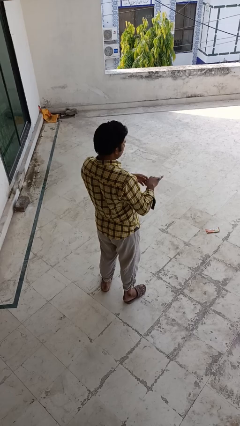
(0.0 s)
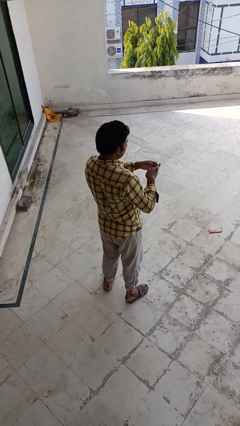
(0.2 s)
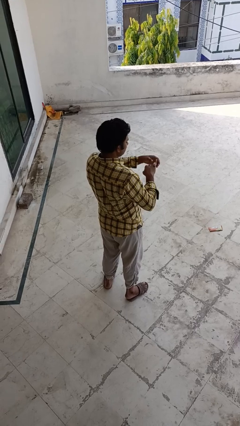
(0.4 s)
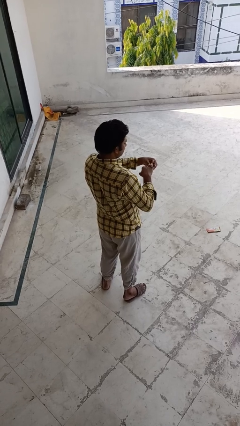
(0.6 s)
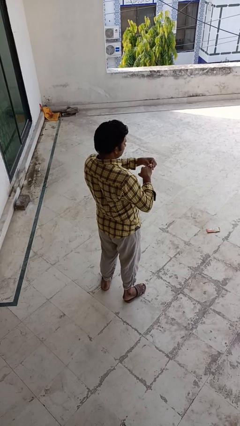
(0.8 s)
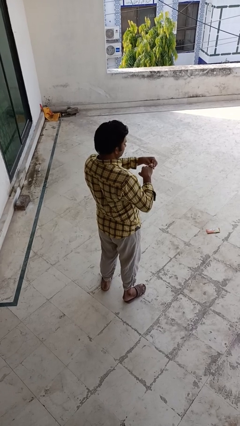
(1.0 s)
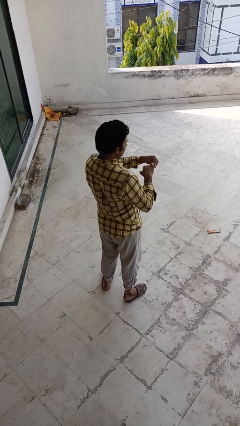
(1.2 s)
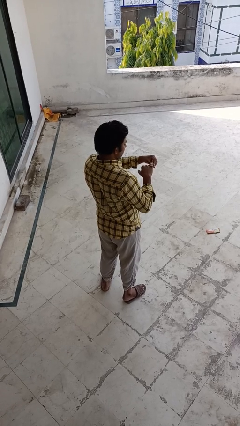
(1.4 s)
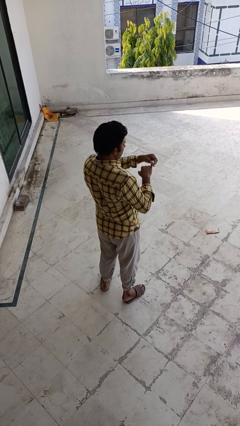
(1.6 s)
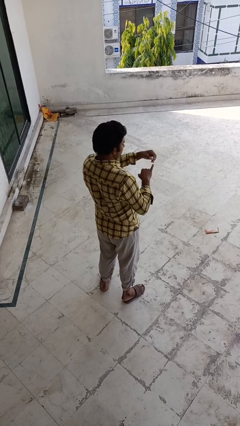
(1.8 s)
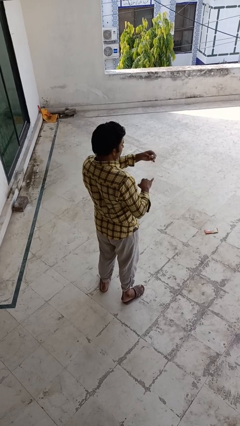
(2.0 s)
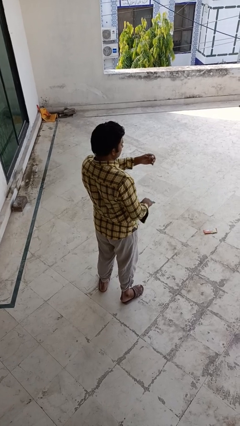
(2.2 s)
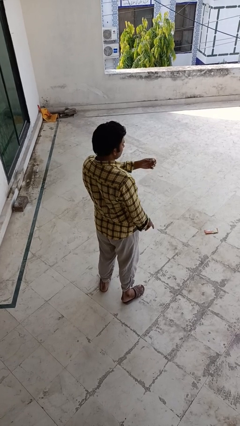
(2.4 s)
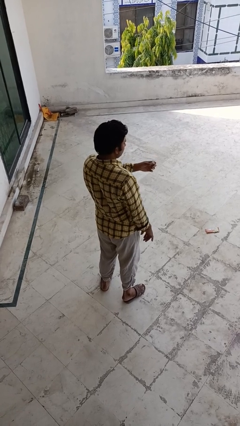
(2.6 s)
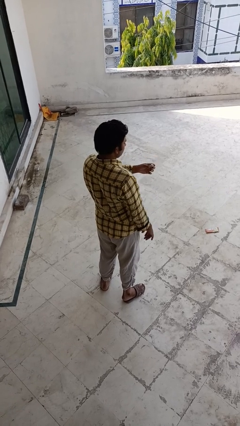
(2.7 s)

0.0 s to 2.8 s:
person takes off ring

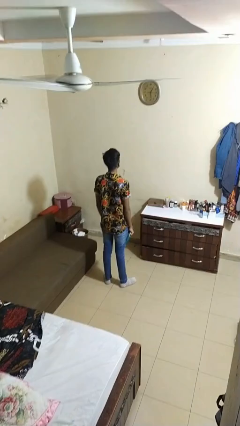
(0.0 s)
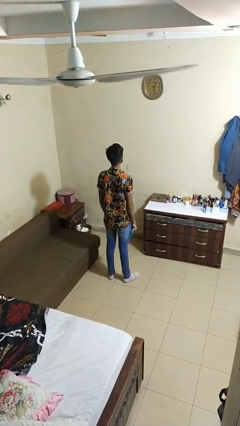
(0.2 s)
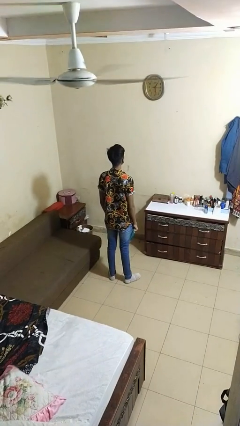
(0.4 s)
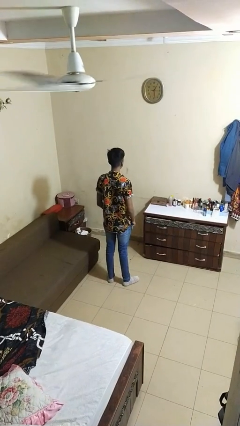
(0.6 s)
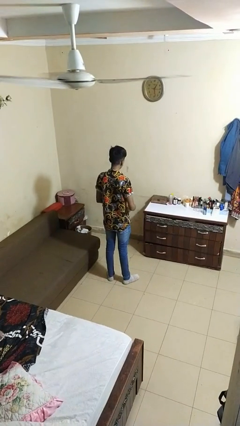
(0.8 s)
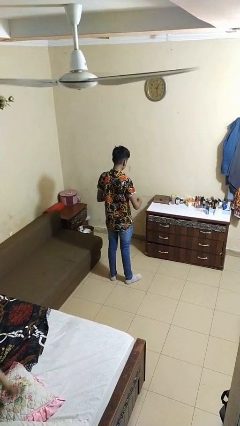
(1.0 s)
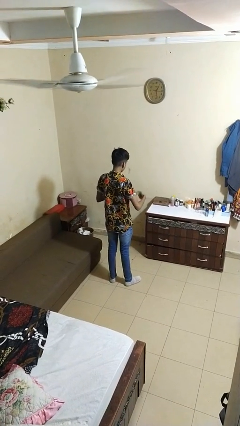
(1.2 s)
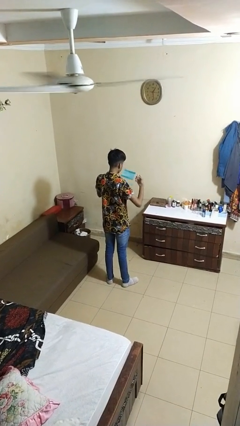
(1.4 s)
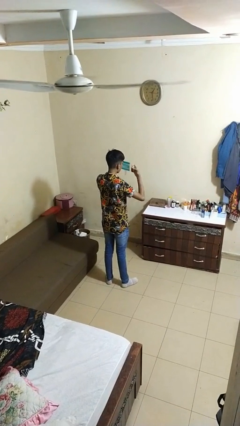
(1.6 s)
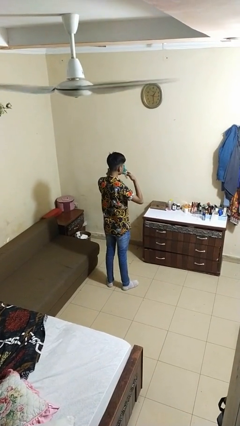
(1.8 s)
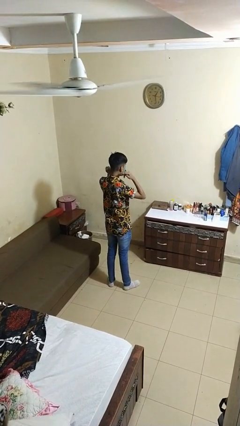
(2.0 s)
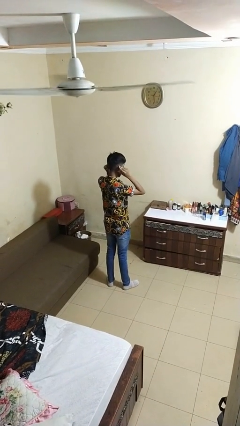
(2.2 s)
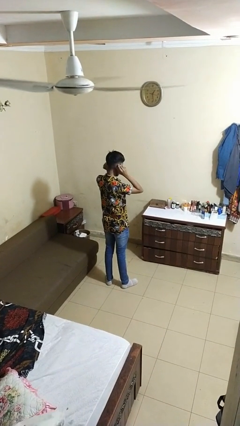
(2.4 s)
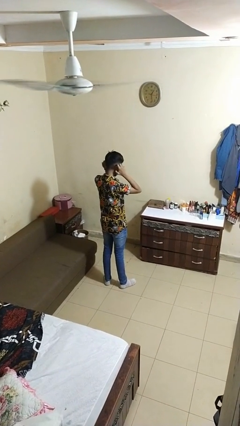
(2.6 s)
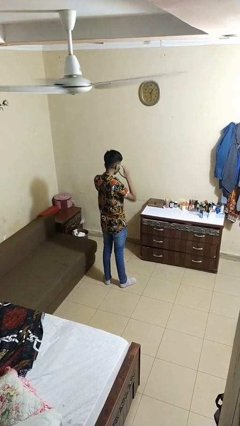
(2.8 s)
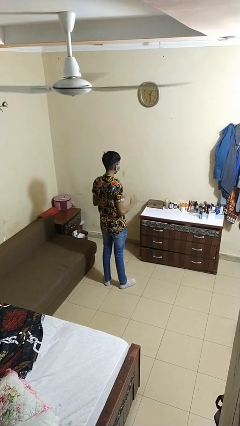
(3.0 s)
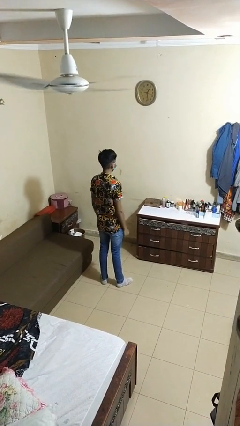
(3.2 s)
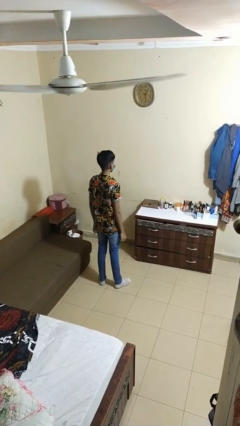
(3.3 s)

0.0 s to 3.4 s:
person puts on facemask

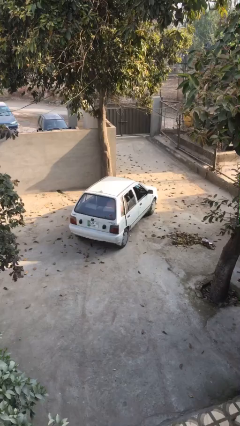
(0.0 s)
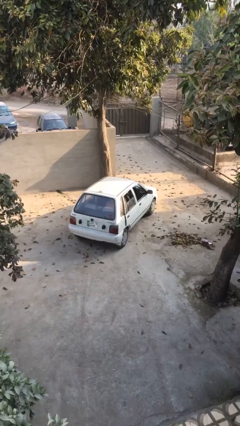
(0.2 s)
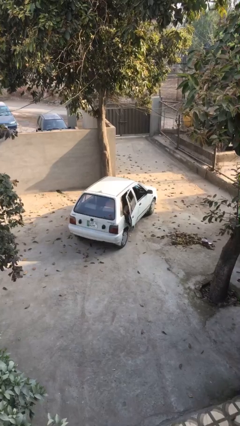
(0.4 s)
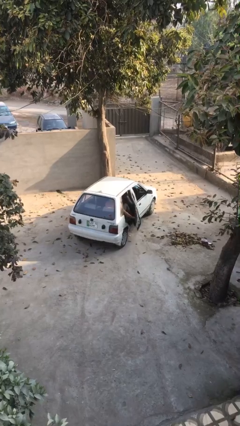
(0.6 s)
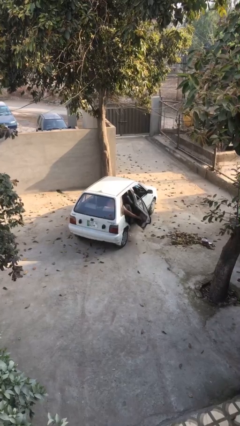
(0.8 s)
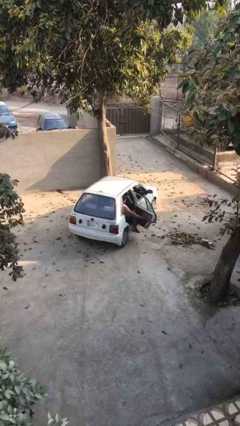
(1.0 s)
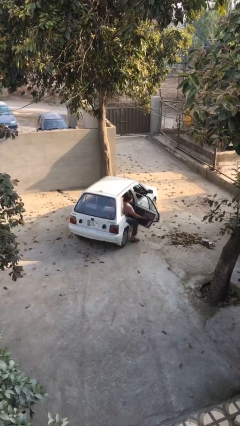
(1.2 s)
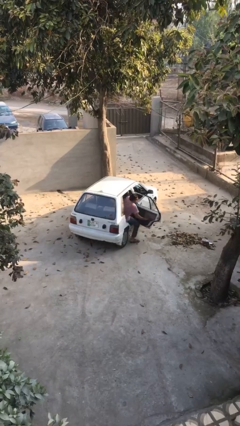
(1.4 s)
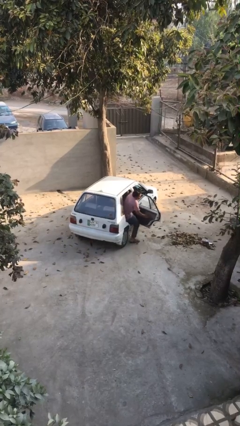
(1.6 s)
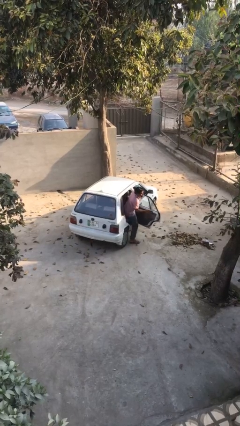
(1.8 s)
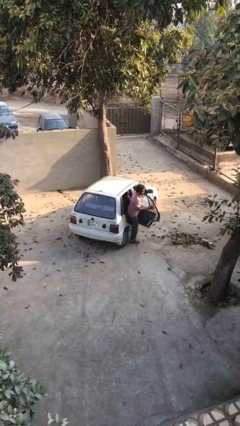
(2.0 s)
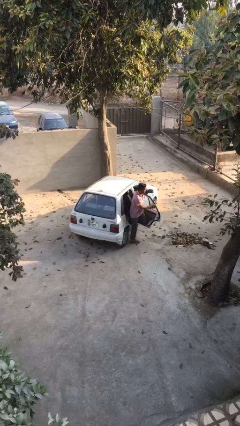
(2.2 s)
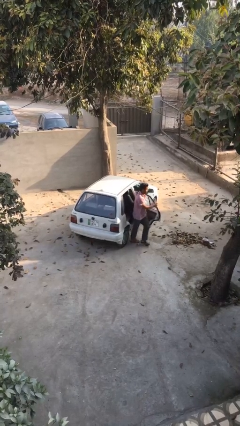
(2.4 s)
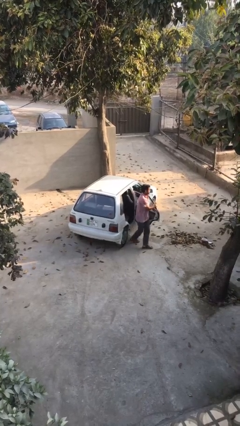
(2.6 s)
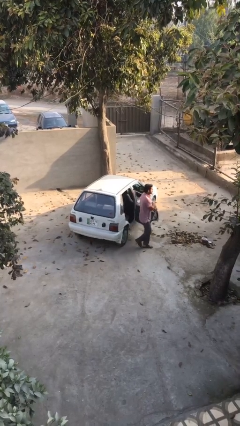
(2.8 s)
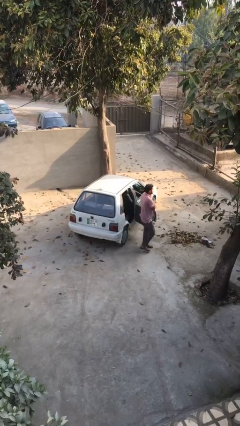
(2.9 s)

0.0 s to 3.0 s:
car drops off person

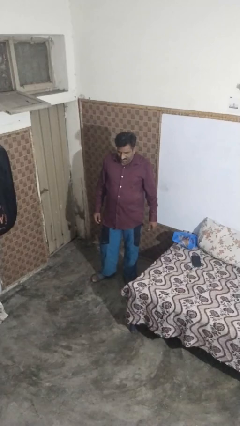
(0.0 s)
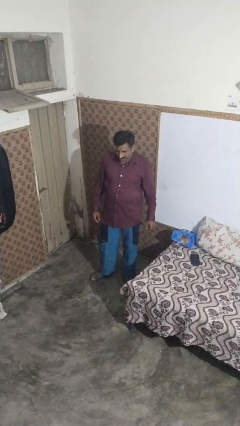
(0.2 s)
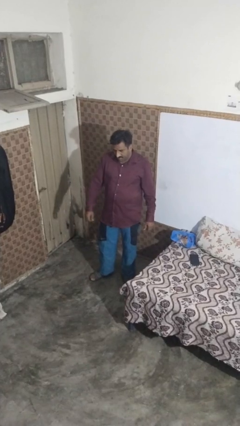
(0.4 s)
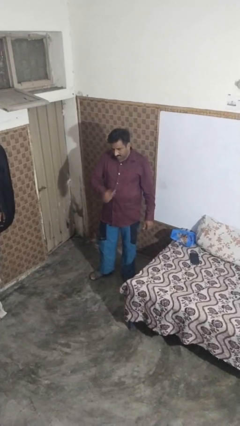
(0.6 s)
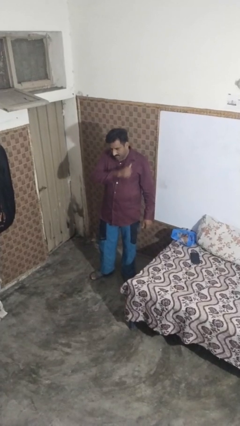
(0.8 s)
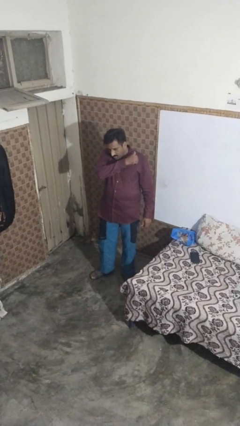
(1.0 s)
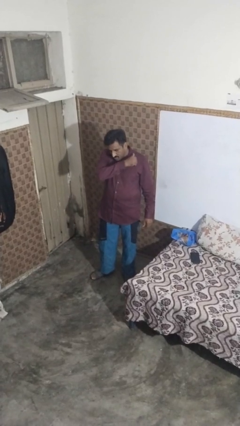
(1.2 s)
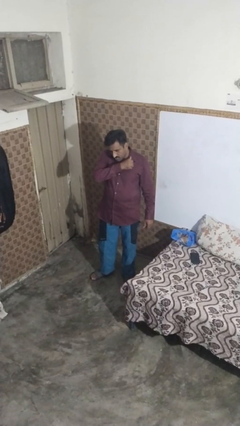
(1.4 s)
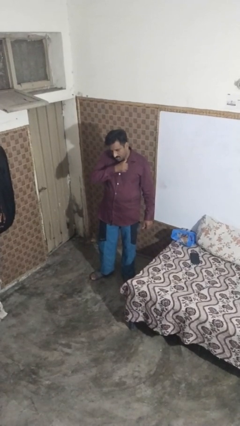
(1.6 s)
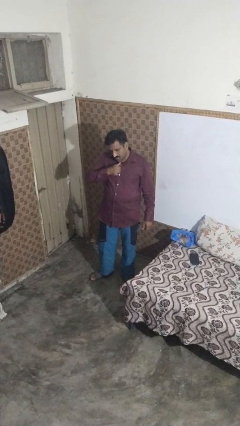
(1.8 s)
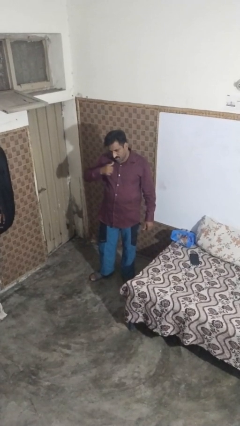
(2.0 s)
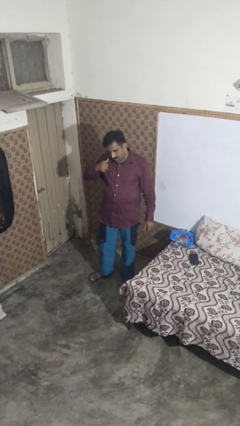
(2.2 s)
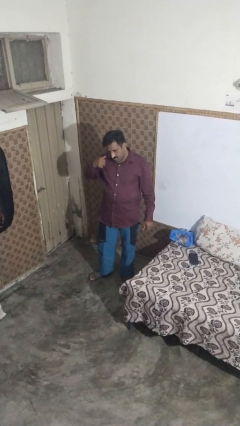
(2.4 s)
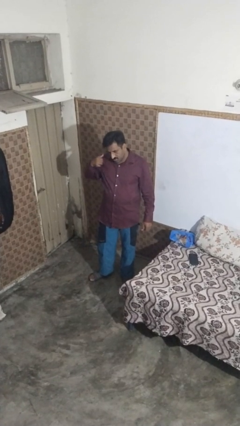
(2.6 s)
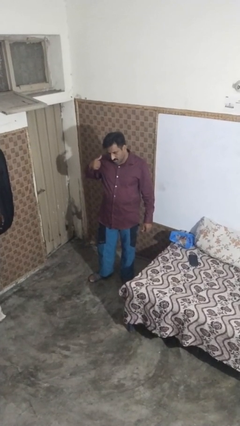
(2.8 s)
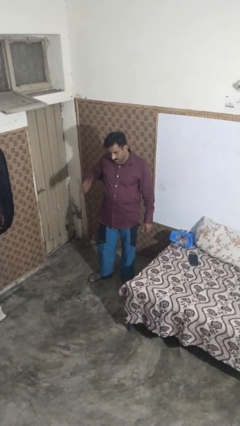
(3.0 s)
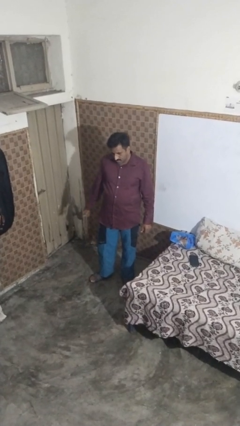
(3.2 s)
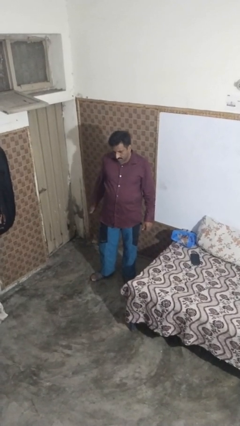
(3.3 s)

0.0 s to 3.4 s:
person gestures cut

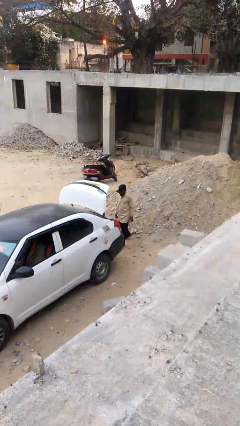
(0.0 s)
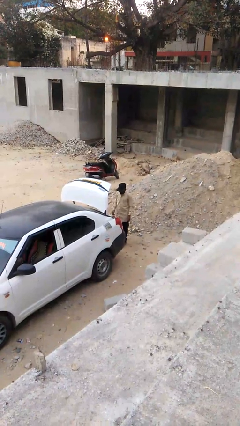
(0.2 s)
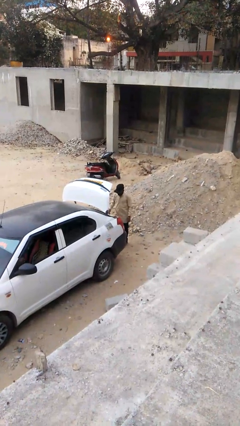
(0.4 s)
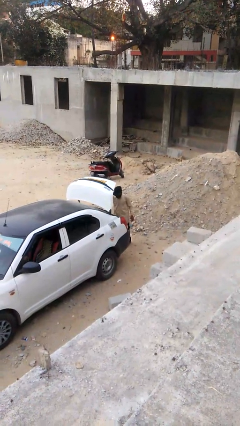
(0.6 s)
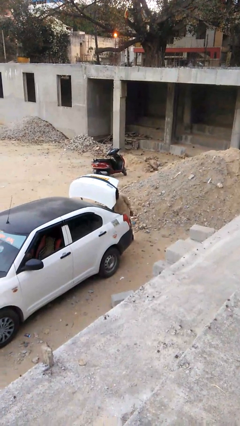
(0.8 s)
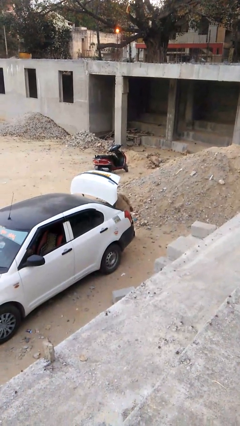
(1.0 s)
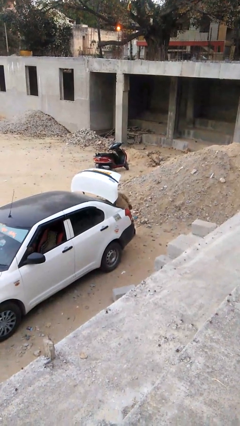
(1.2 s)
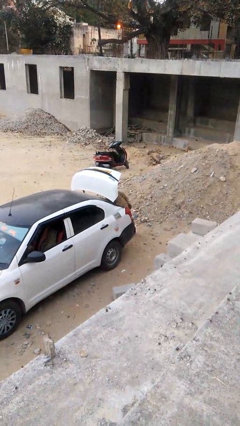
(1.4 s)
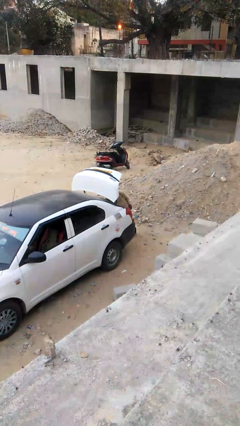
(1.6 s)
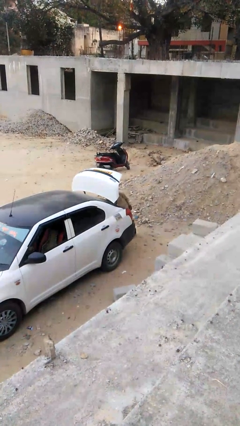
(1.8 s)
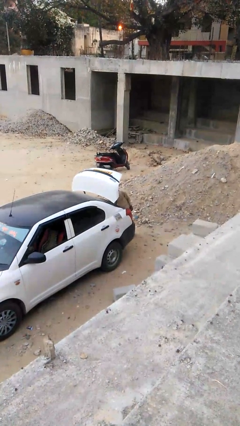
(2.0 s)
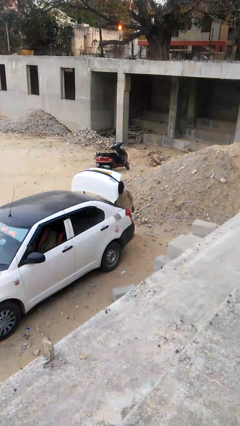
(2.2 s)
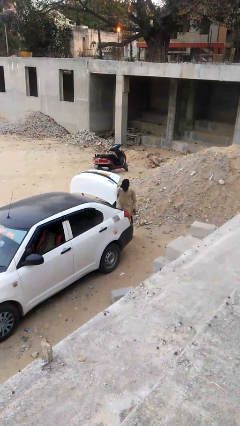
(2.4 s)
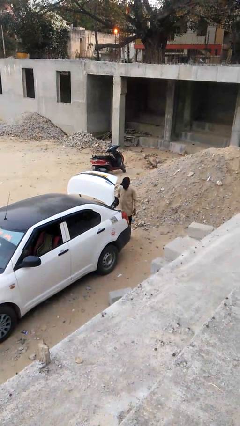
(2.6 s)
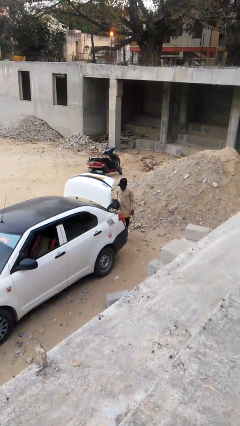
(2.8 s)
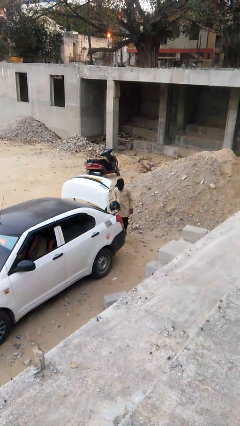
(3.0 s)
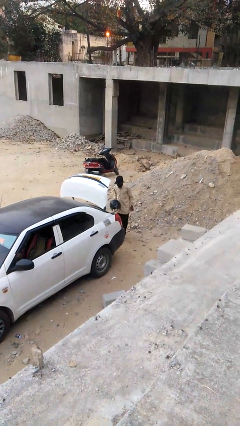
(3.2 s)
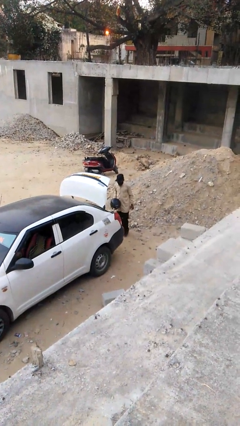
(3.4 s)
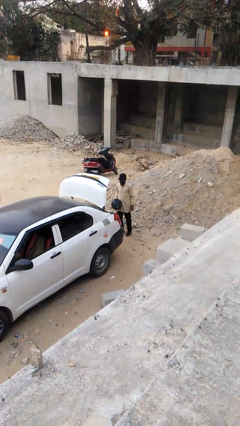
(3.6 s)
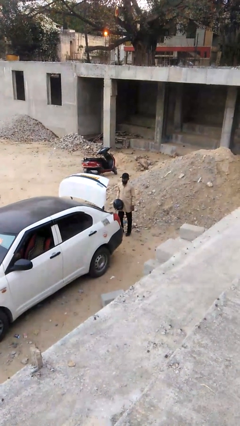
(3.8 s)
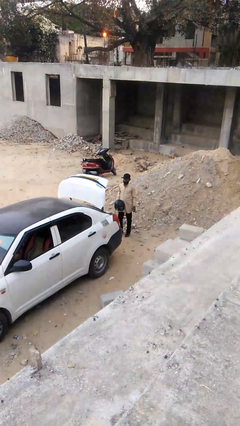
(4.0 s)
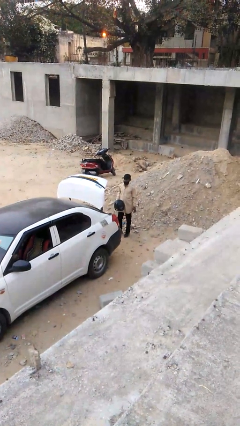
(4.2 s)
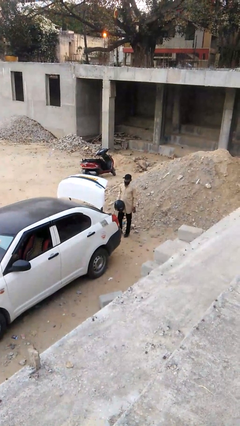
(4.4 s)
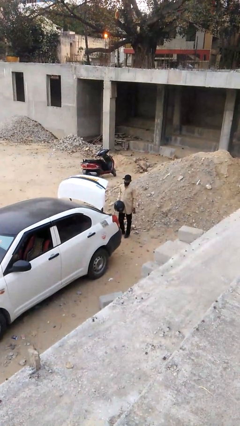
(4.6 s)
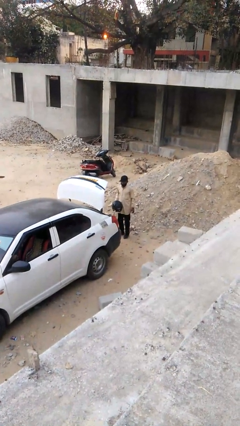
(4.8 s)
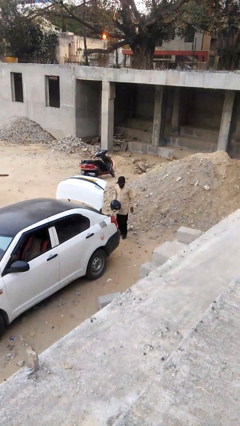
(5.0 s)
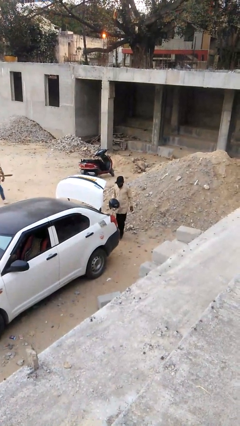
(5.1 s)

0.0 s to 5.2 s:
person unloads car
